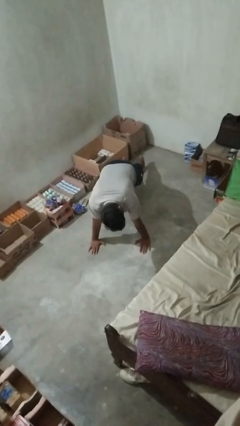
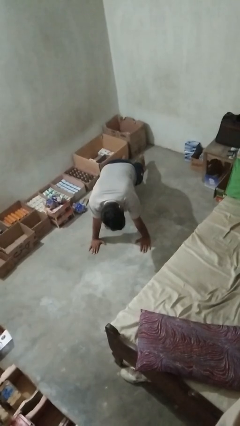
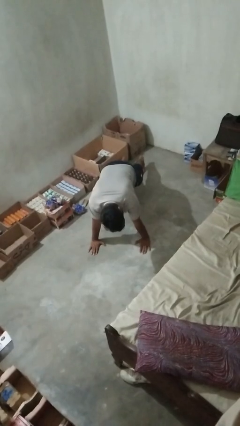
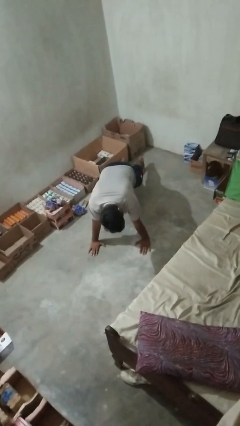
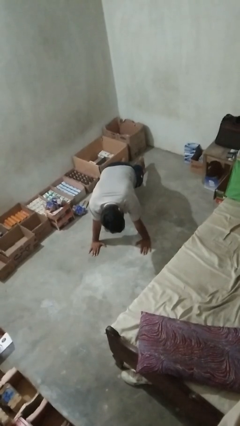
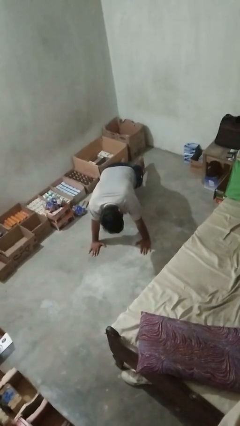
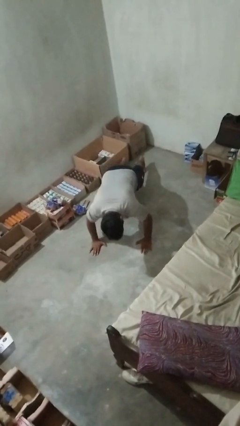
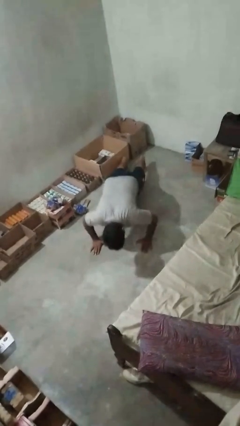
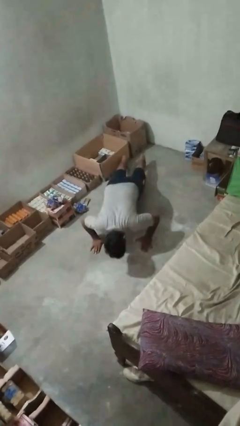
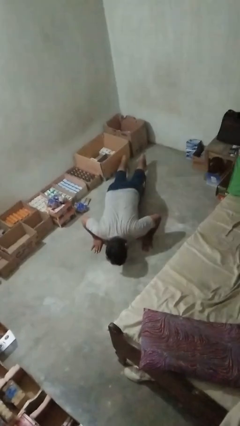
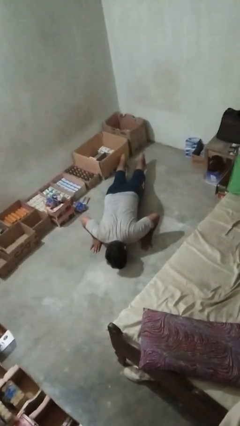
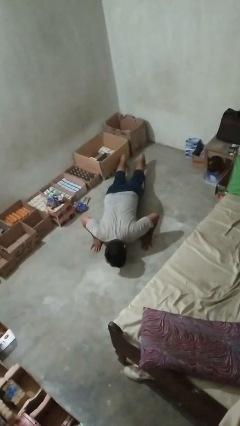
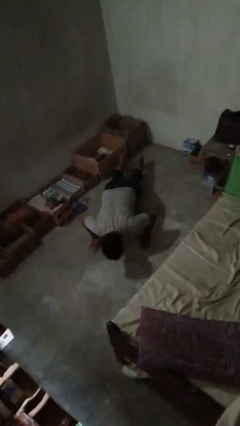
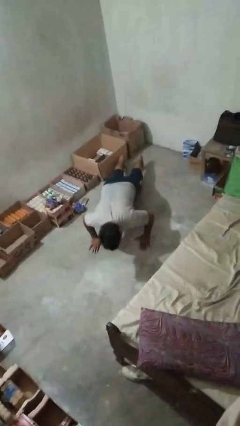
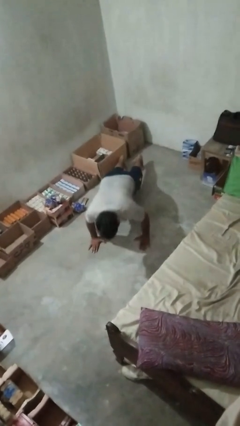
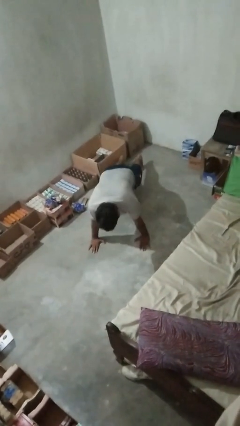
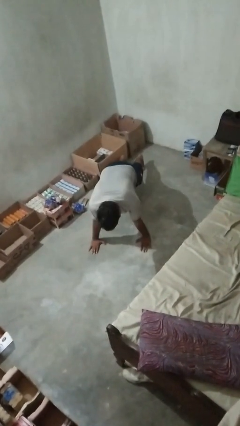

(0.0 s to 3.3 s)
person exercises with pushup

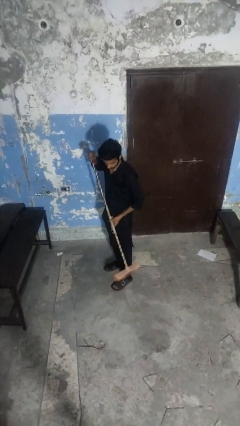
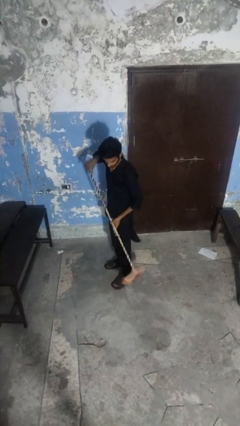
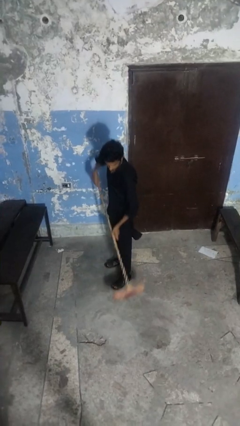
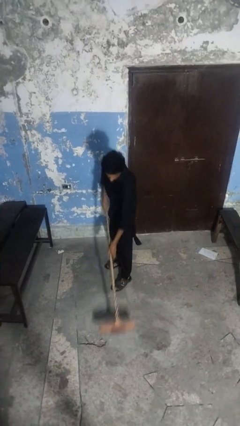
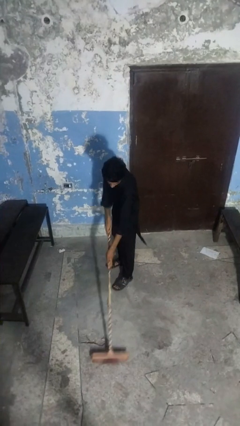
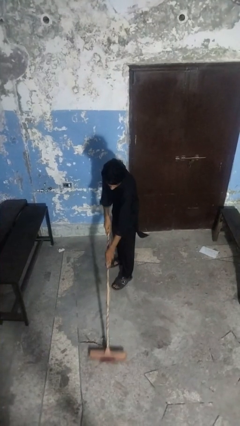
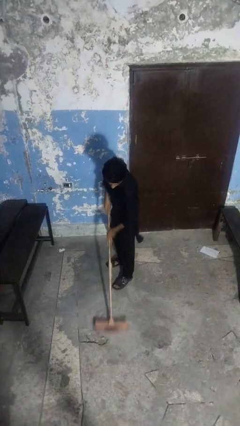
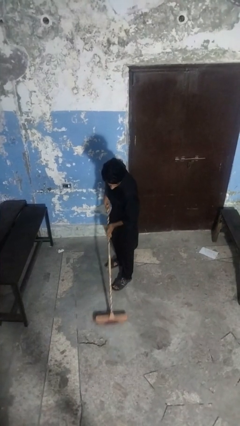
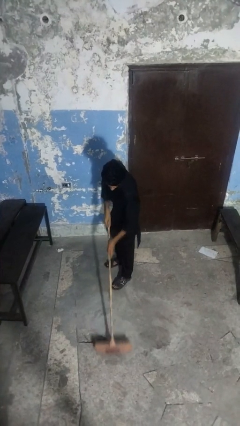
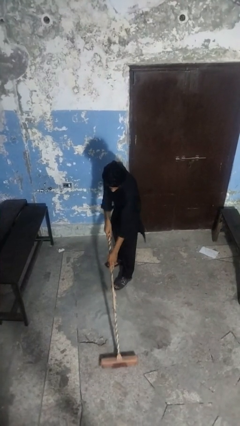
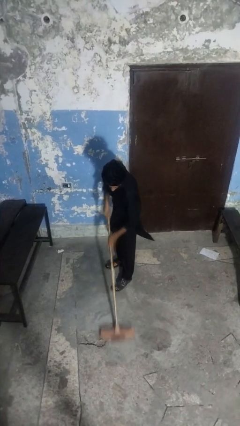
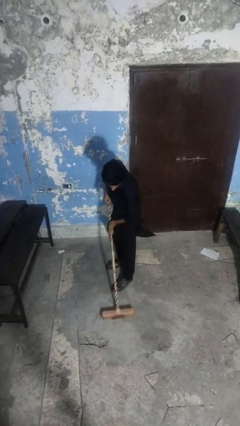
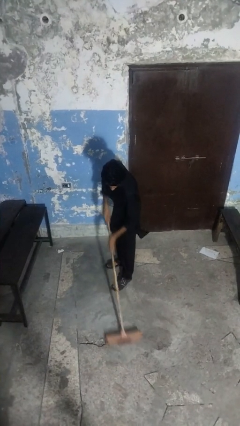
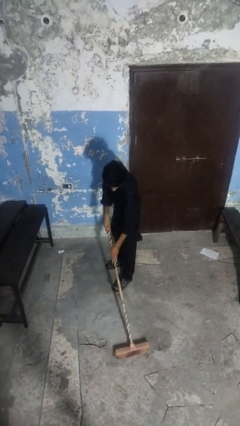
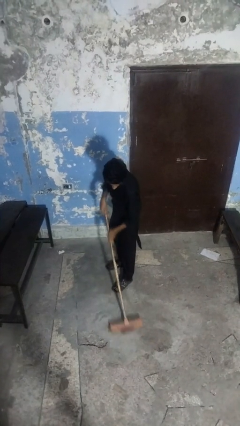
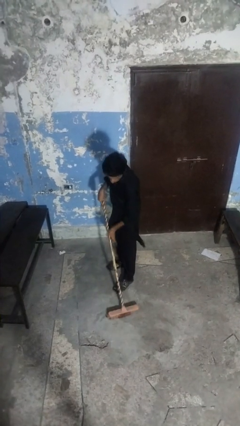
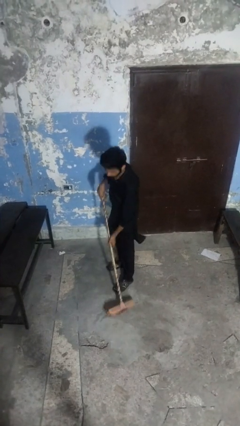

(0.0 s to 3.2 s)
person sweeps floor

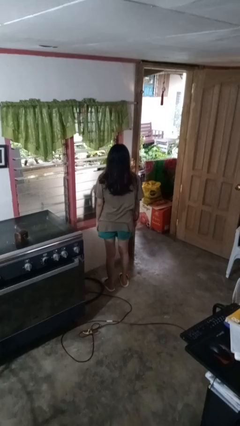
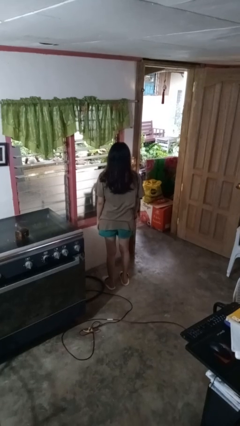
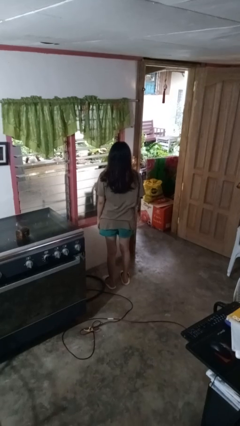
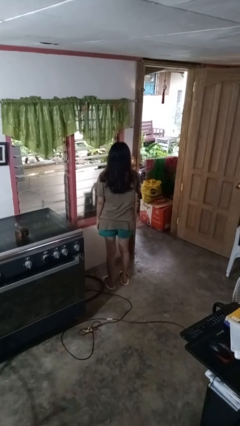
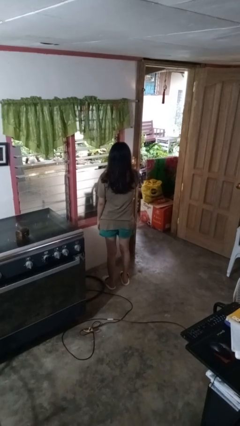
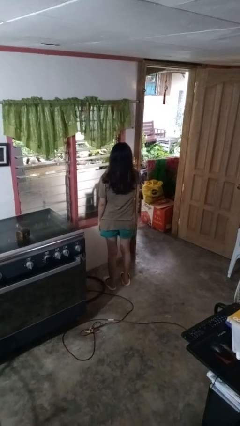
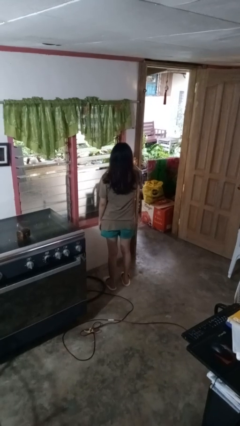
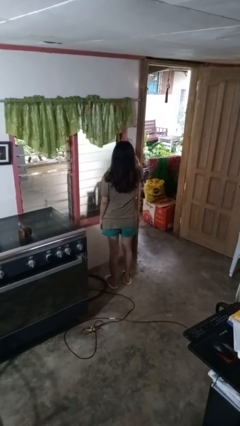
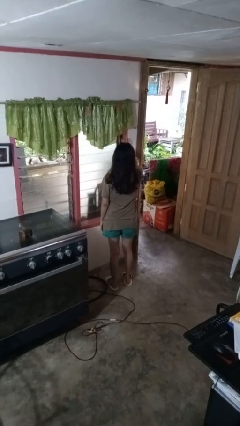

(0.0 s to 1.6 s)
person closes home window

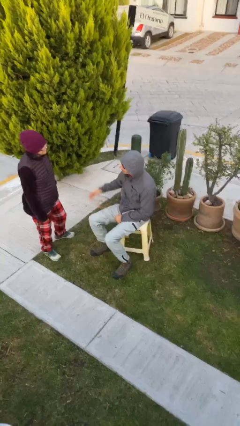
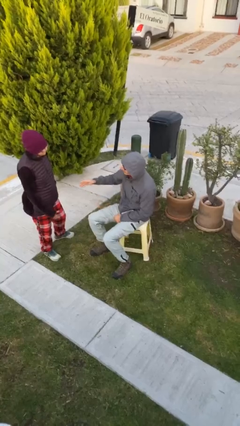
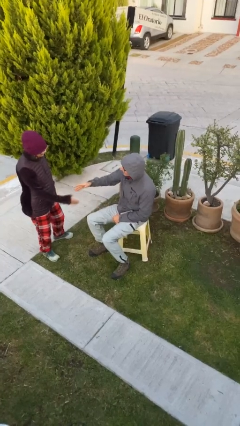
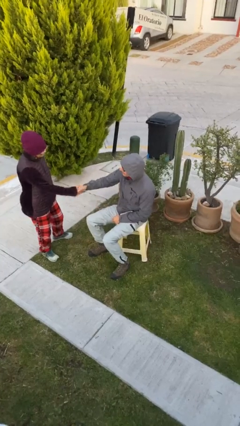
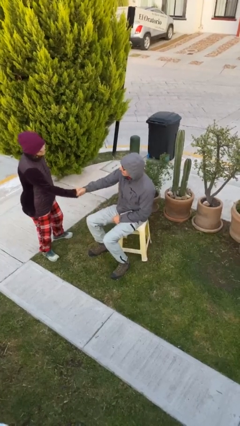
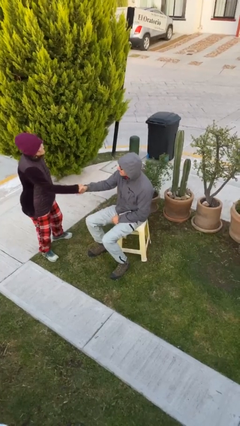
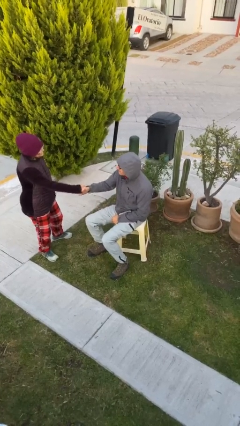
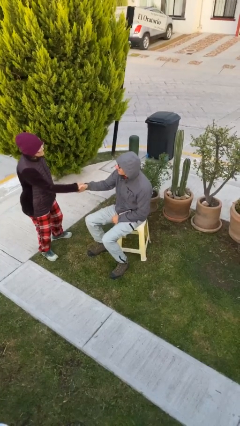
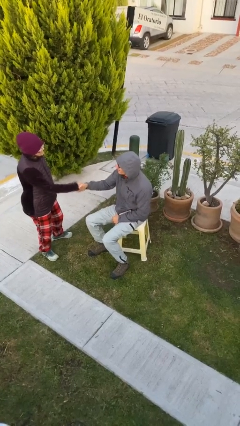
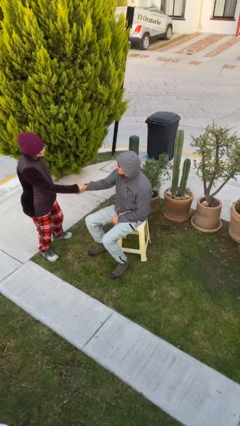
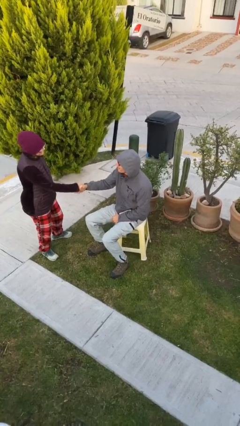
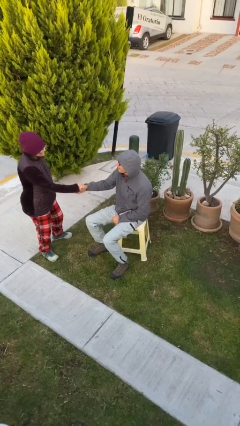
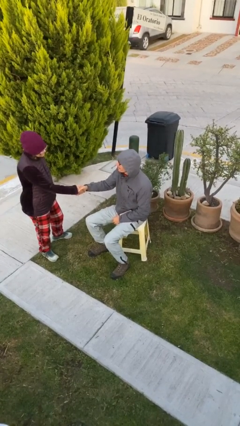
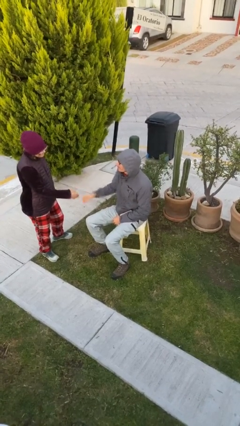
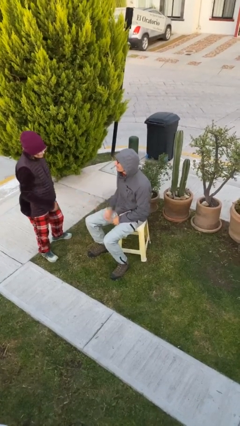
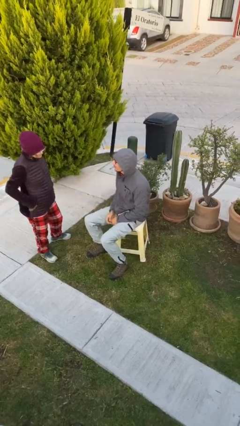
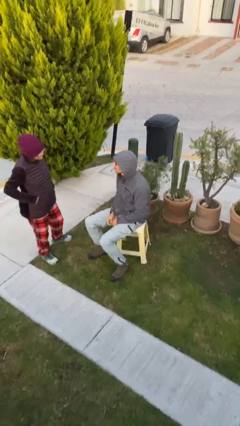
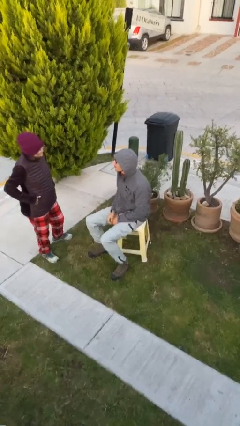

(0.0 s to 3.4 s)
person shakes hand

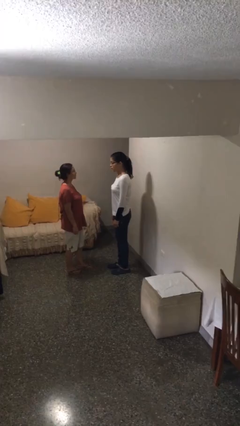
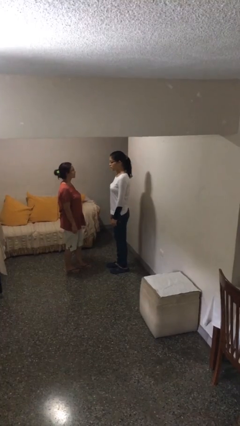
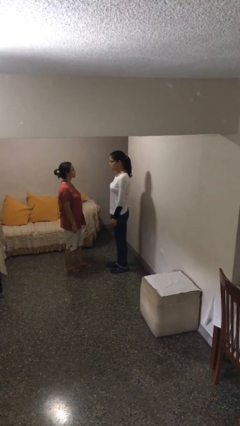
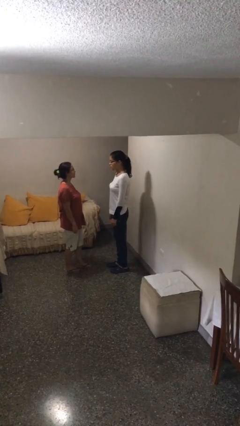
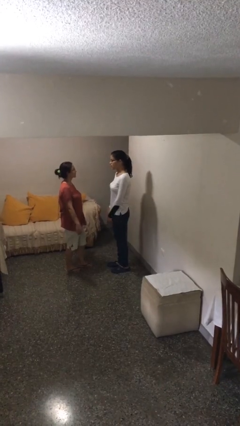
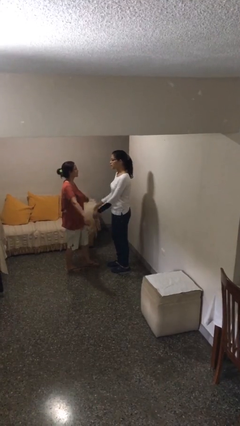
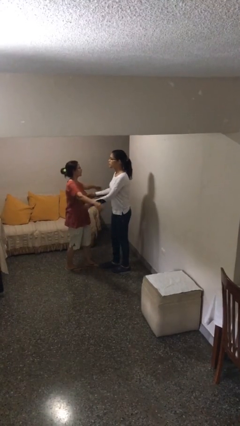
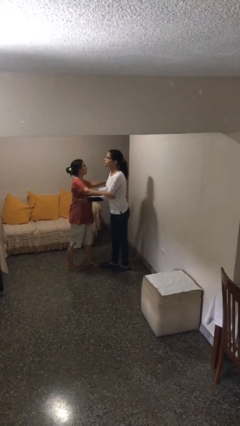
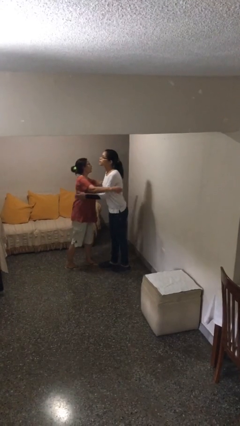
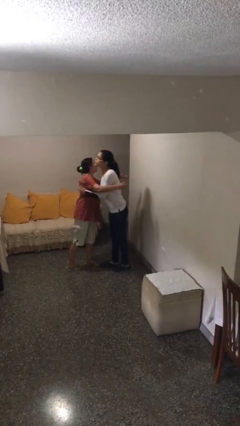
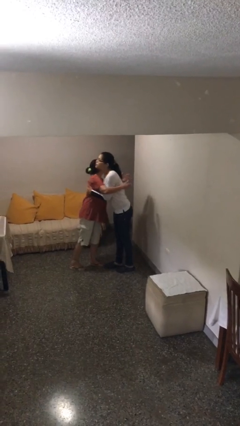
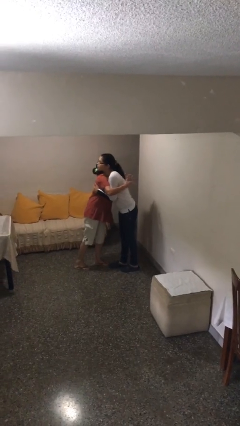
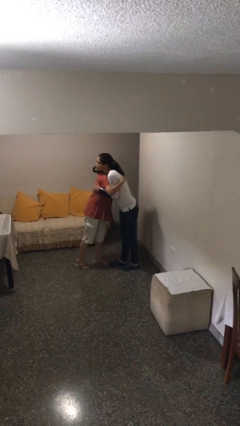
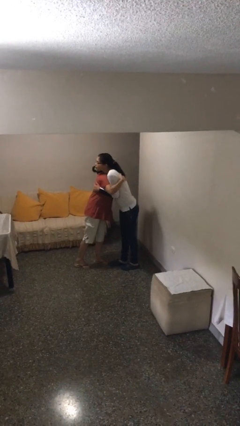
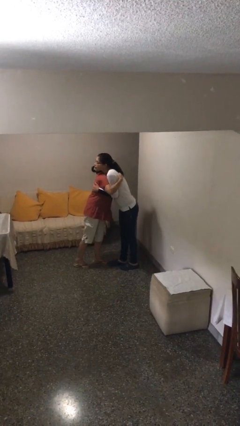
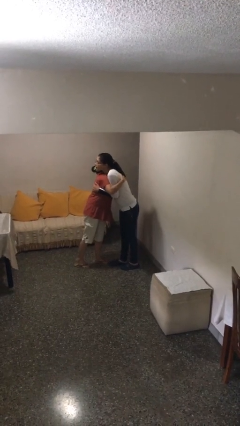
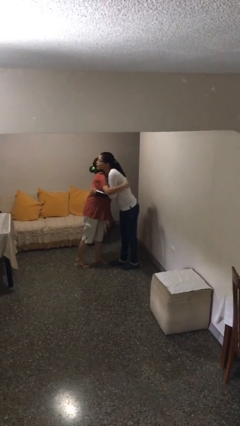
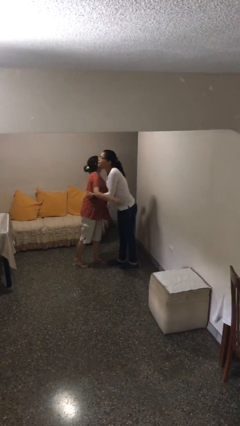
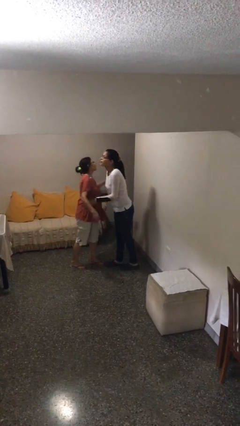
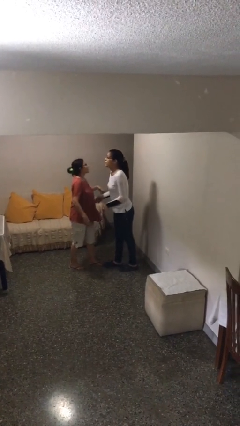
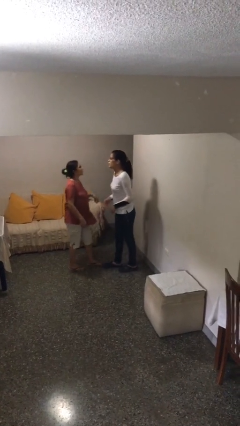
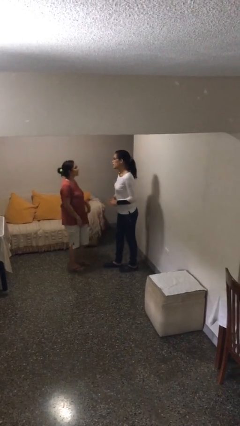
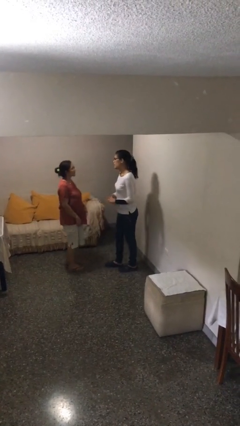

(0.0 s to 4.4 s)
person embraces person

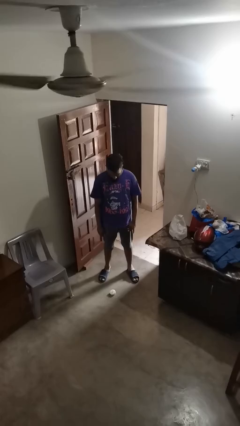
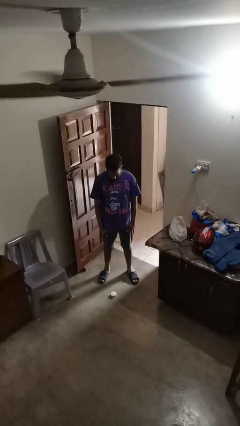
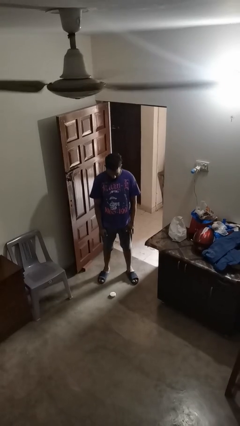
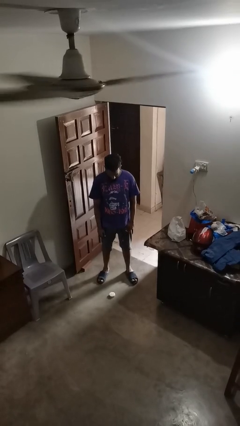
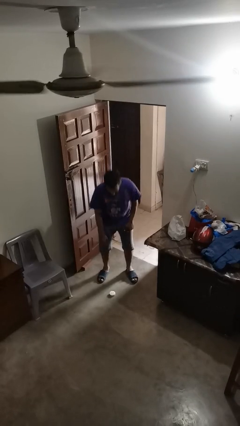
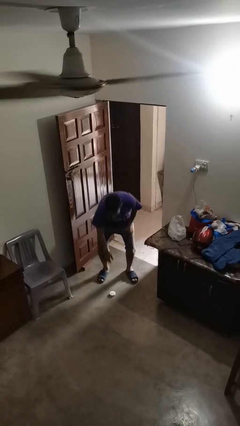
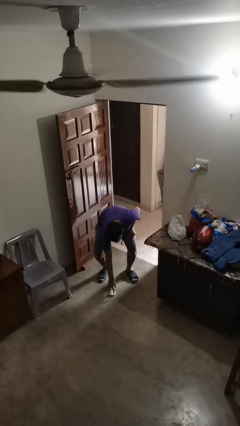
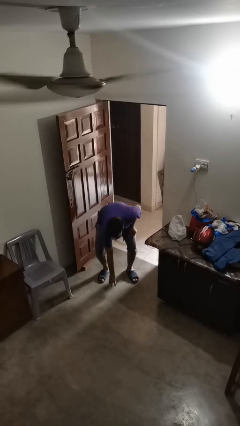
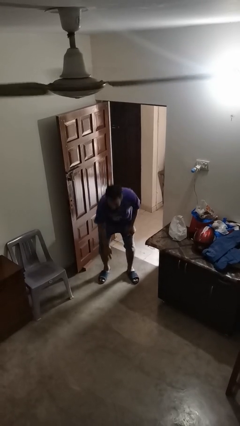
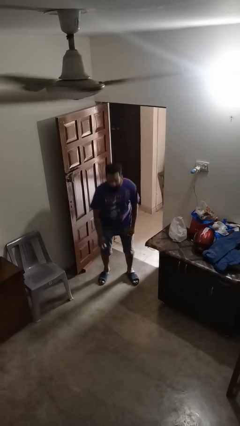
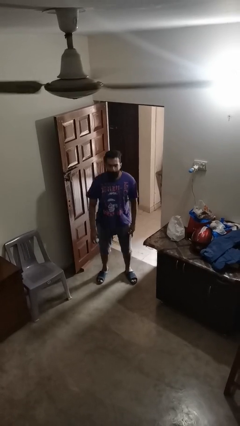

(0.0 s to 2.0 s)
person picks up object from floor
